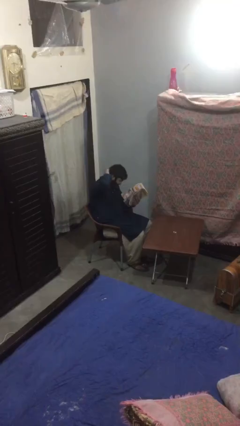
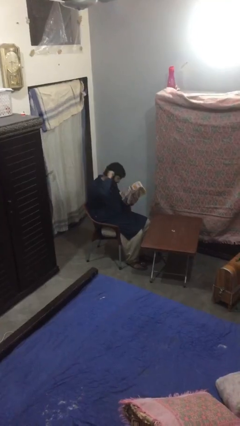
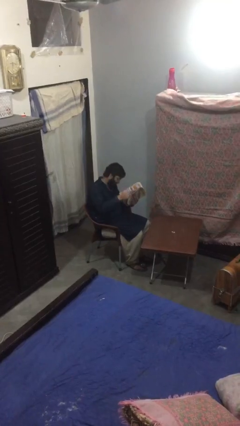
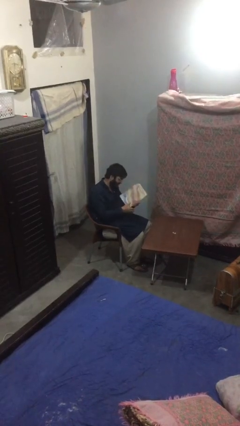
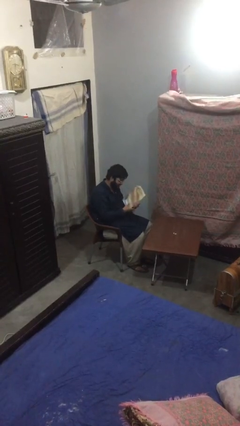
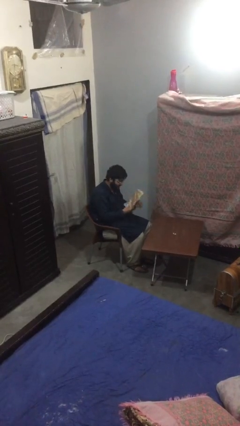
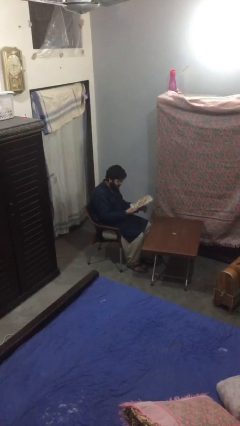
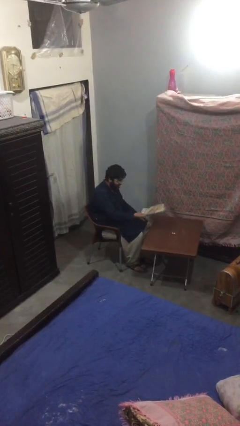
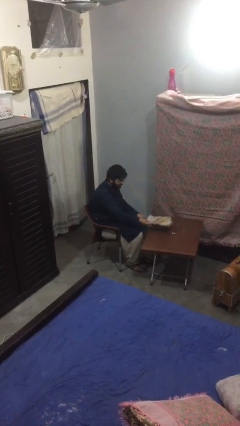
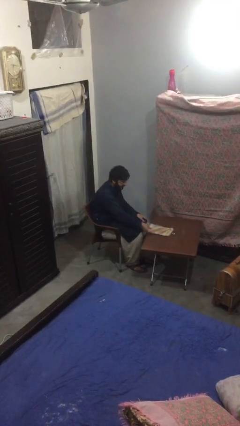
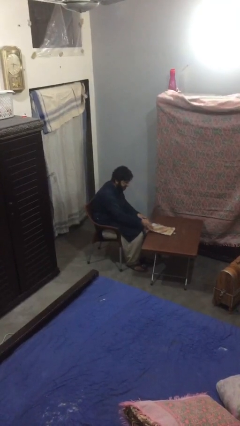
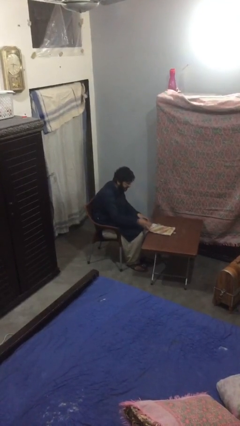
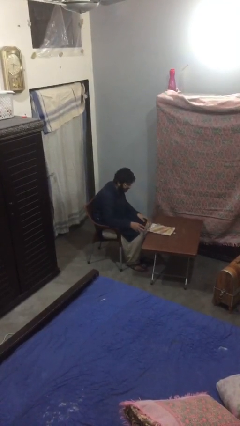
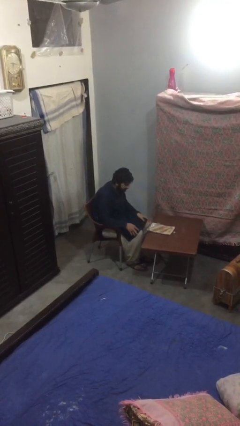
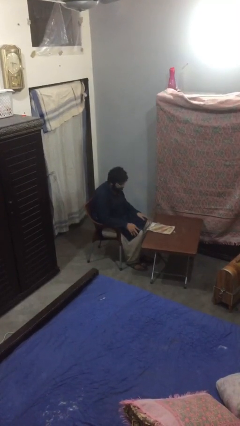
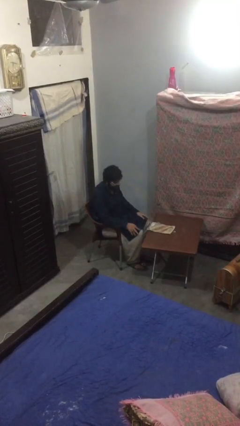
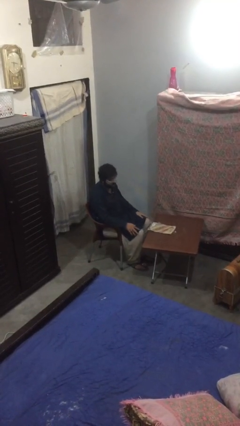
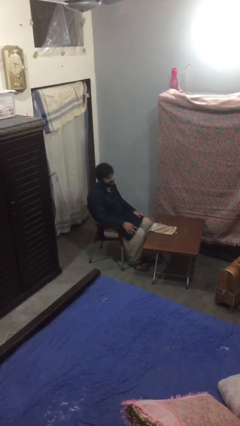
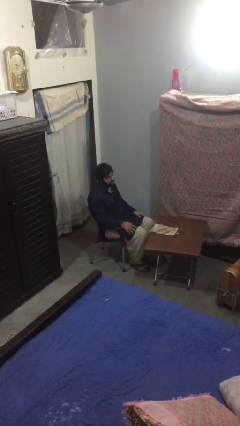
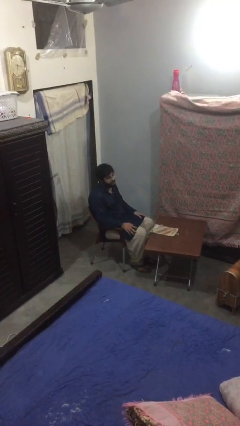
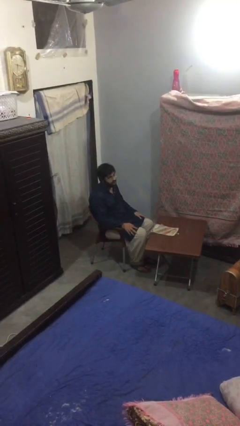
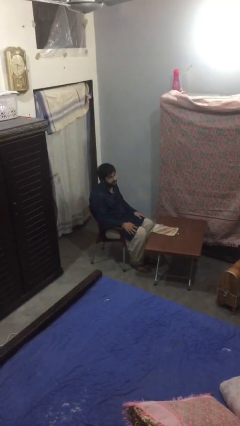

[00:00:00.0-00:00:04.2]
person puts down object on table

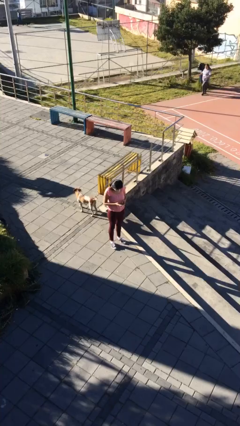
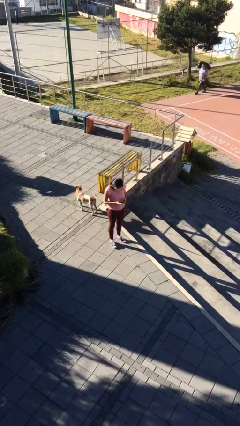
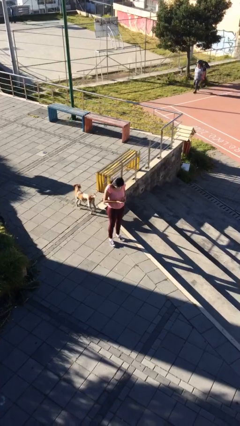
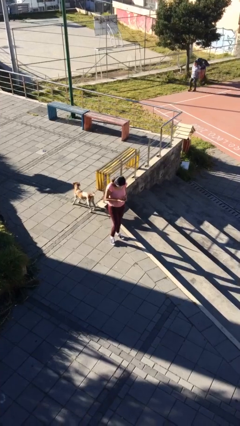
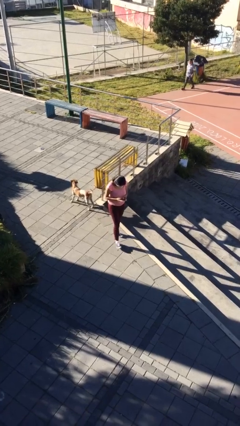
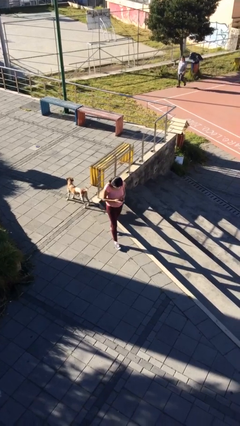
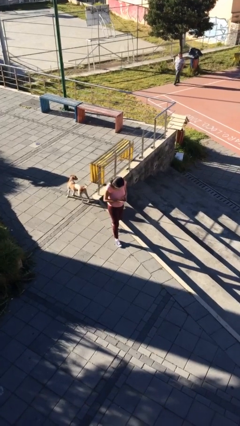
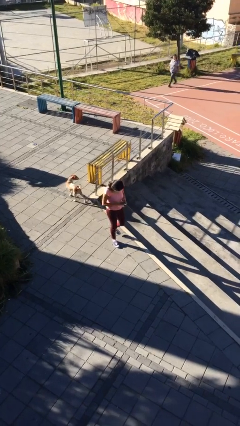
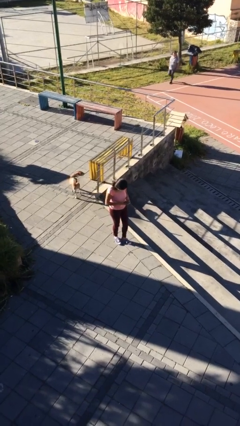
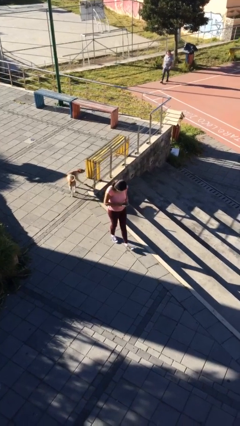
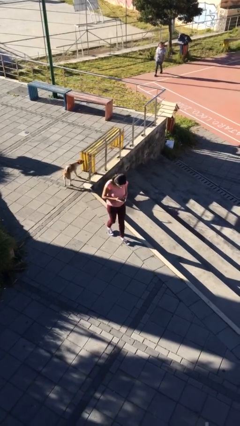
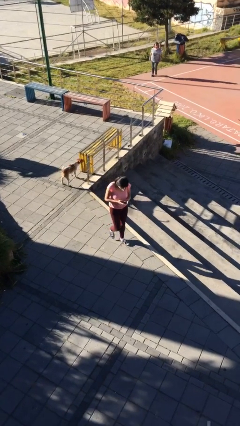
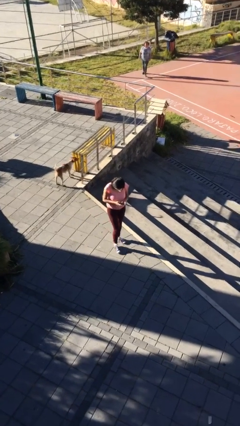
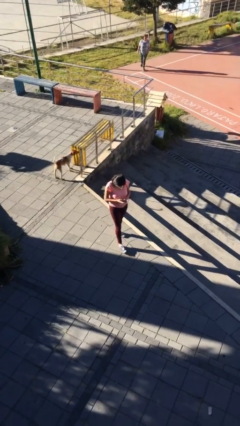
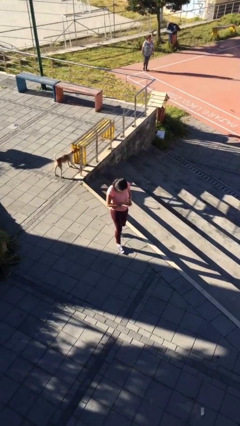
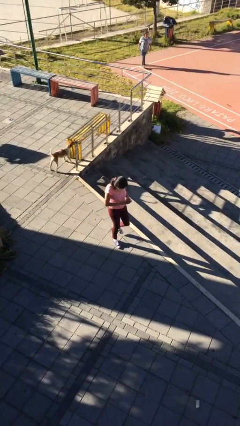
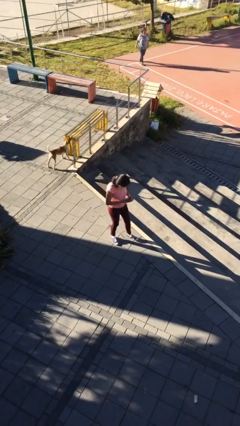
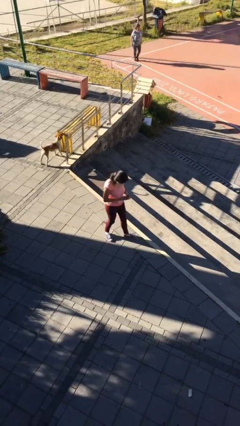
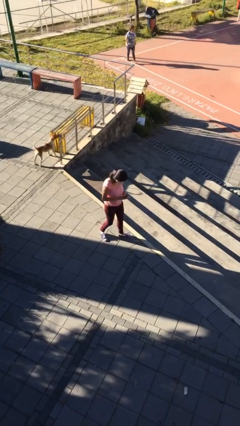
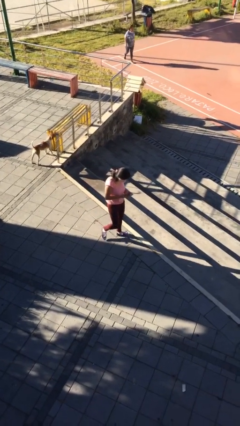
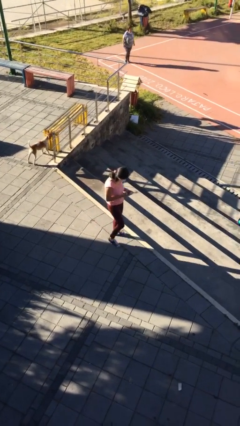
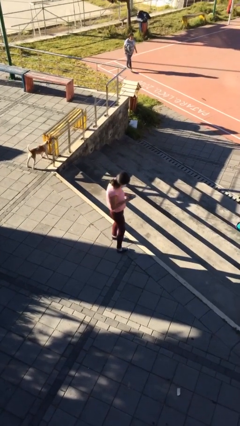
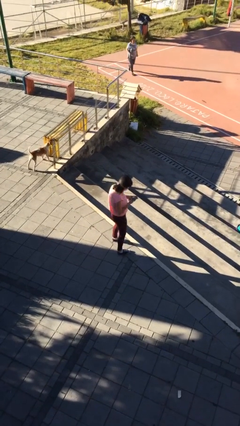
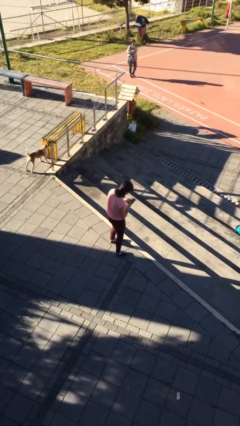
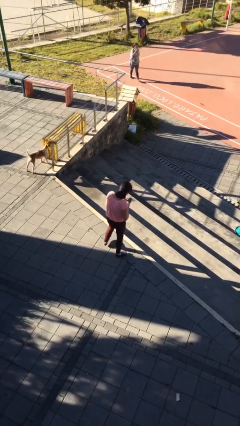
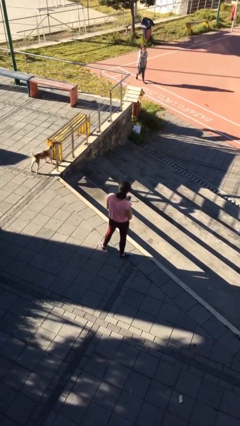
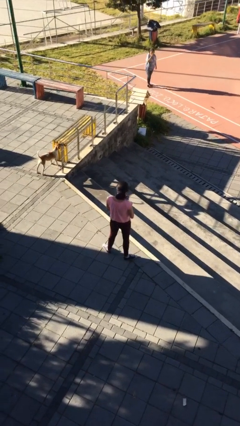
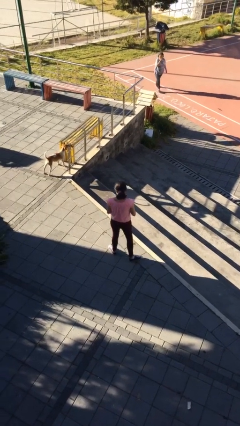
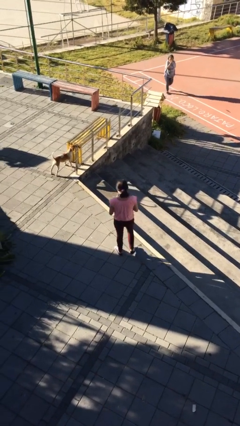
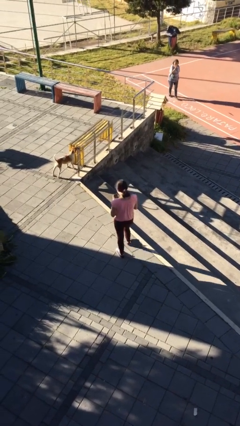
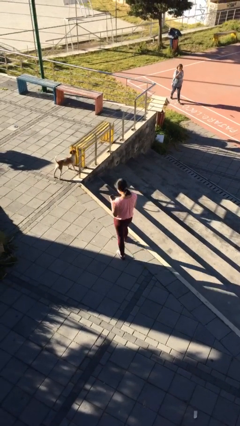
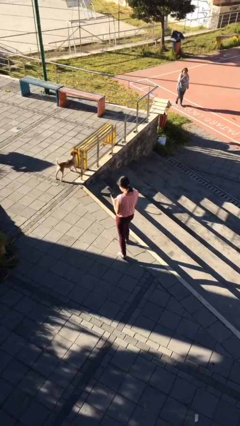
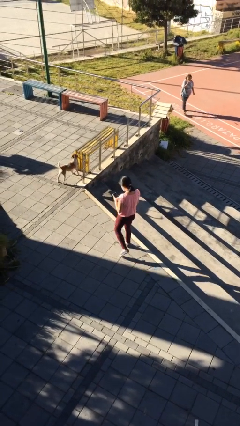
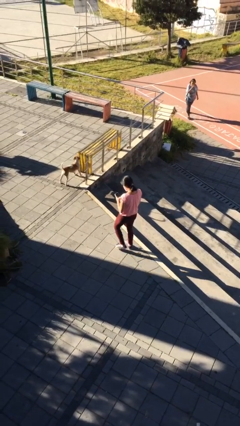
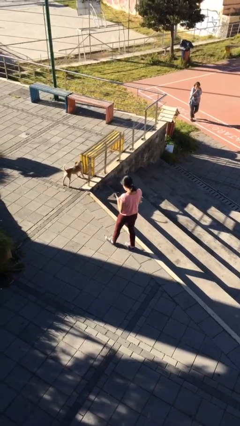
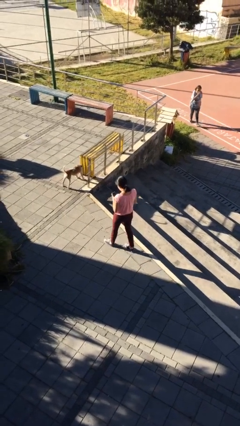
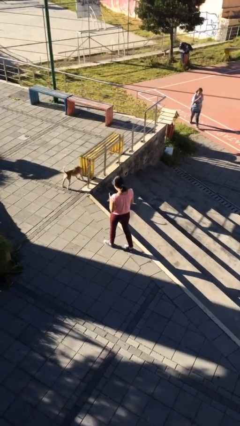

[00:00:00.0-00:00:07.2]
person texts on phone

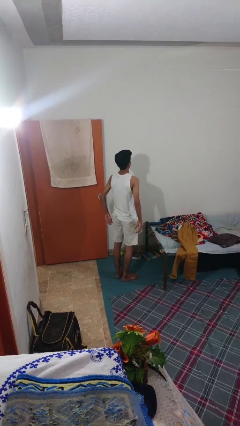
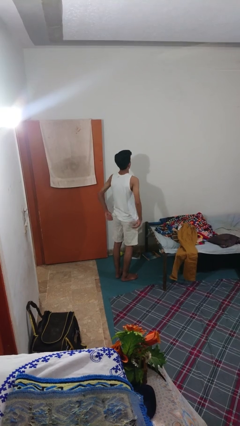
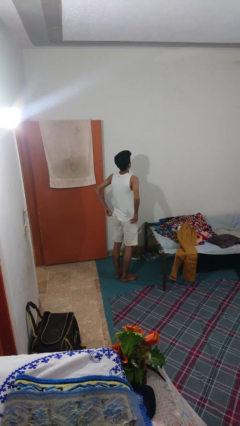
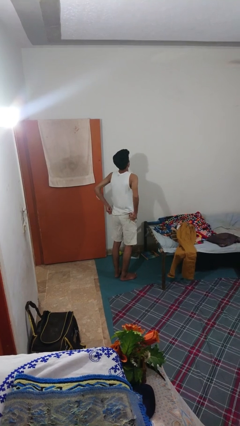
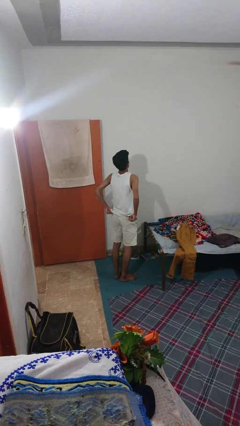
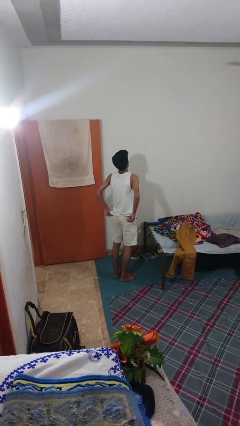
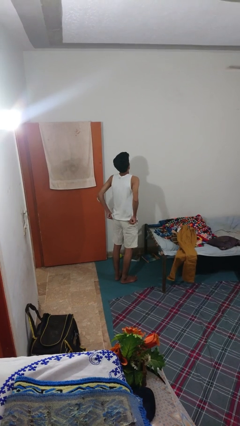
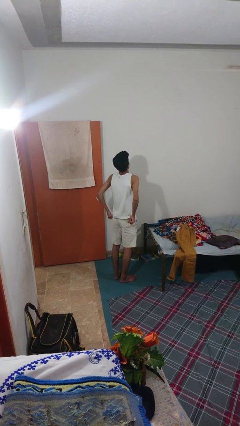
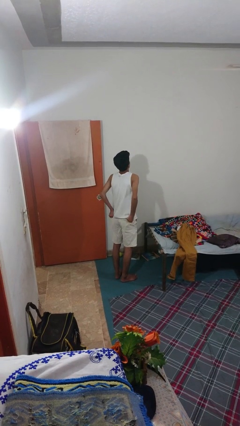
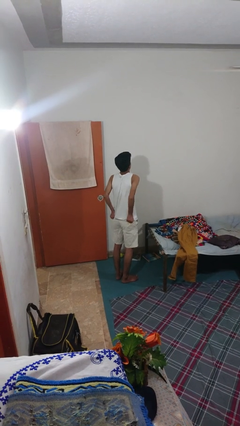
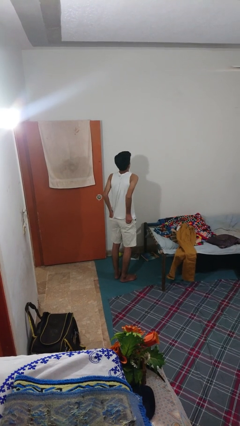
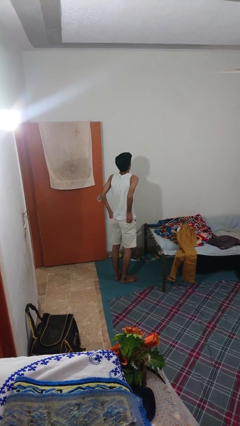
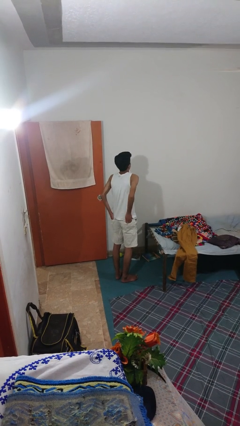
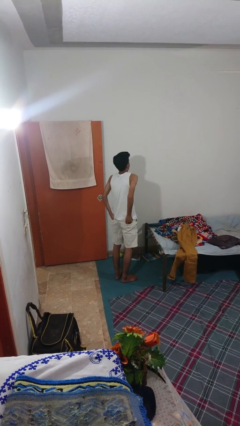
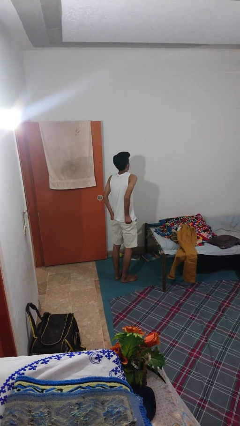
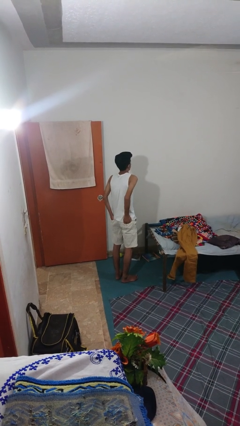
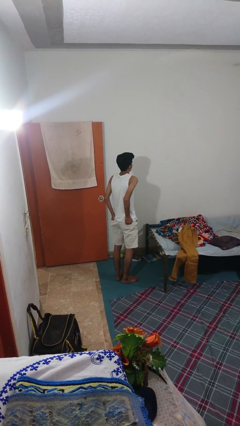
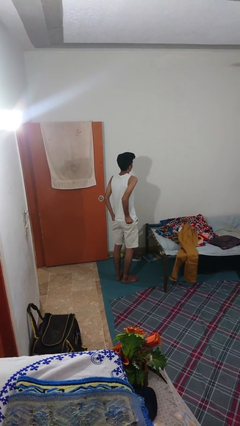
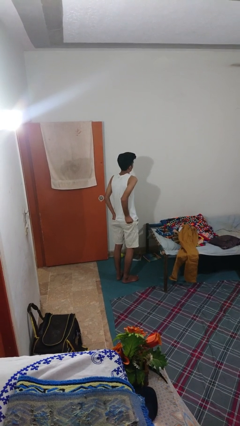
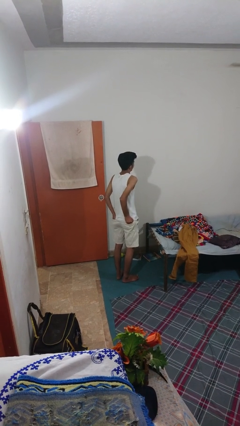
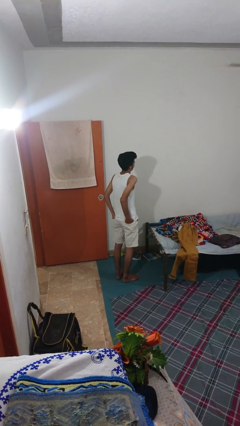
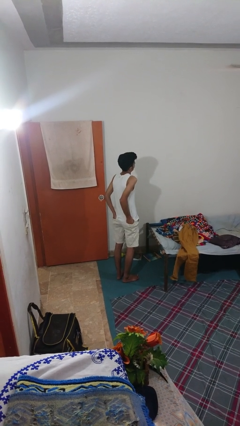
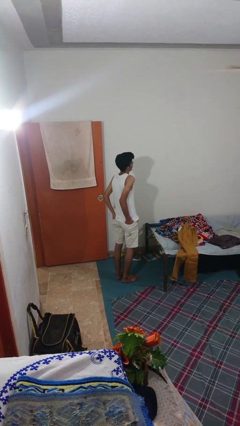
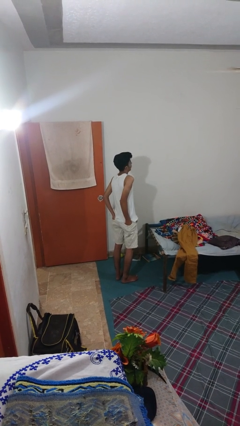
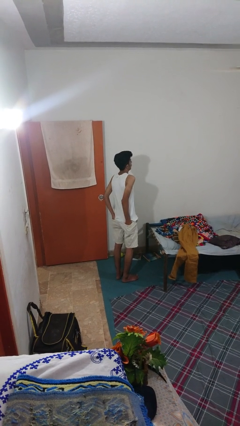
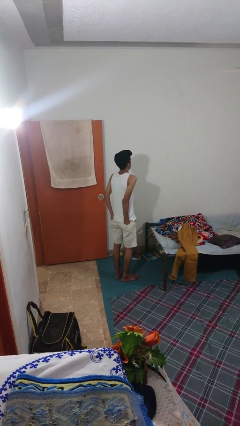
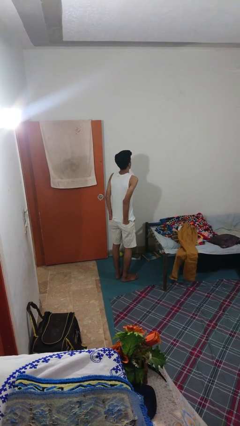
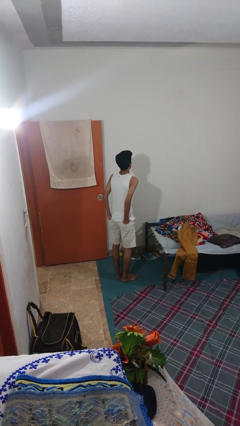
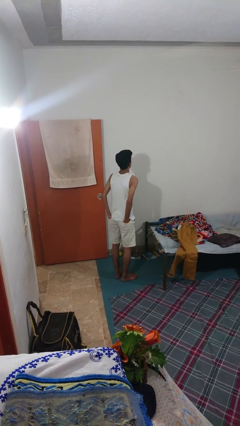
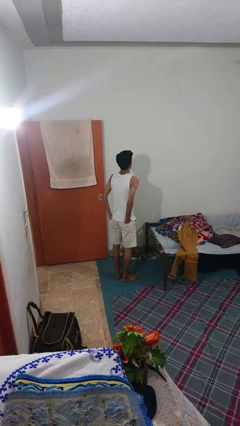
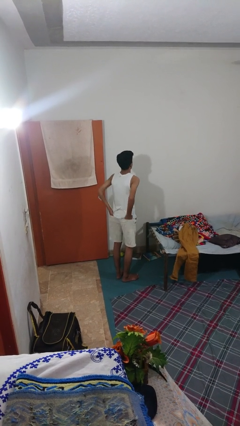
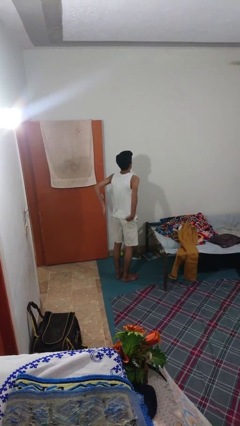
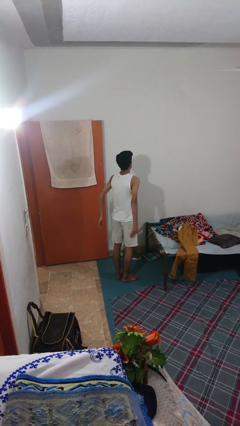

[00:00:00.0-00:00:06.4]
person puts hands in back pockets
